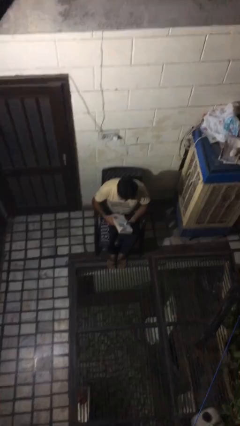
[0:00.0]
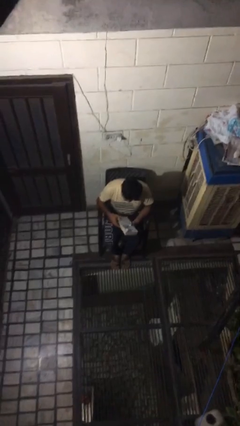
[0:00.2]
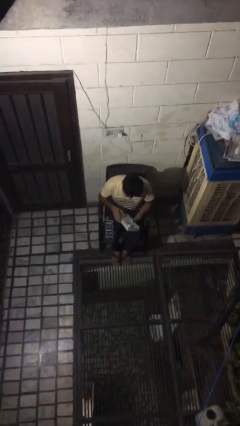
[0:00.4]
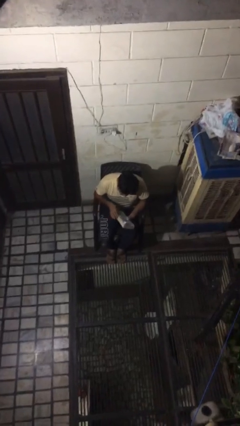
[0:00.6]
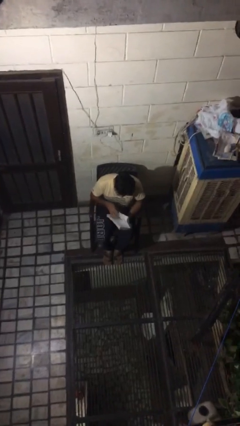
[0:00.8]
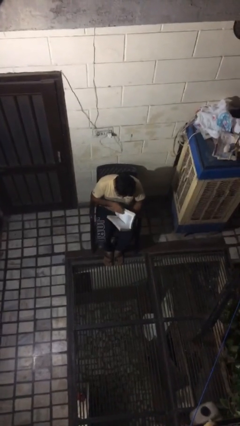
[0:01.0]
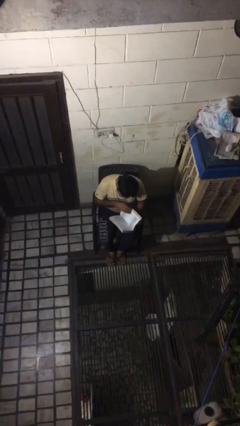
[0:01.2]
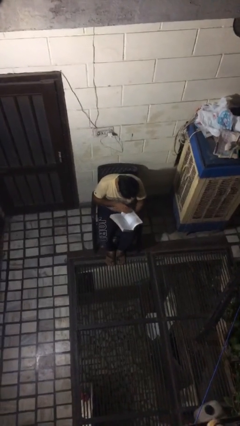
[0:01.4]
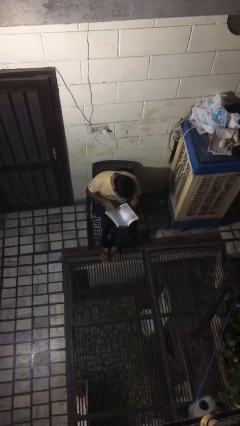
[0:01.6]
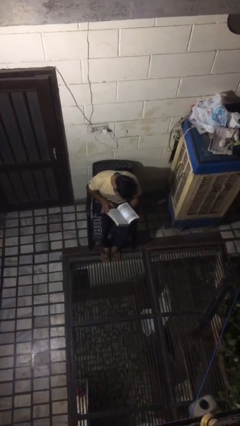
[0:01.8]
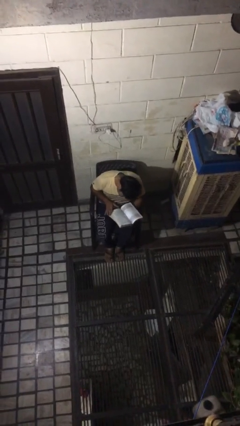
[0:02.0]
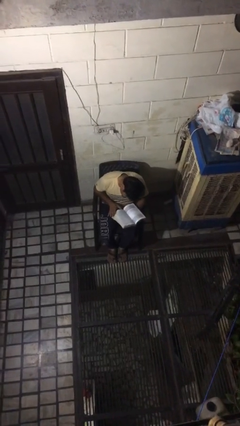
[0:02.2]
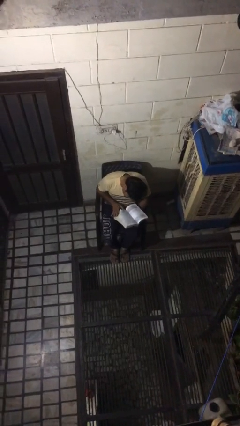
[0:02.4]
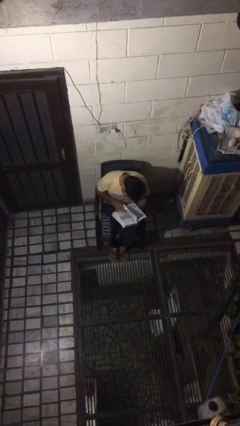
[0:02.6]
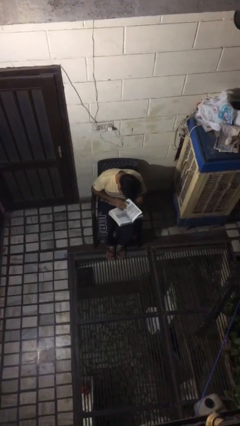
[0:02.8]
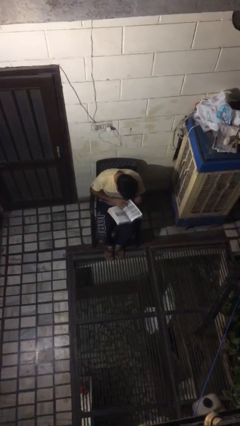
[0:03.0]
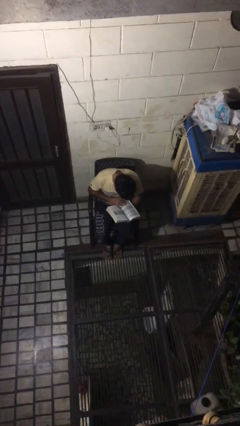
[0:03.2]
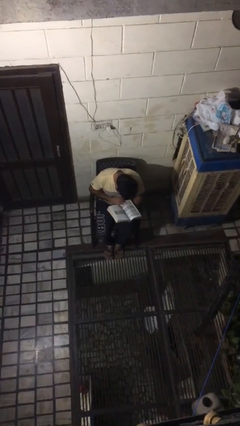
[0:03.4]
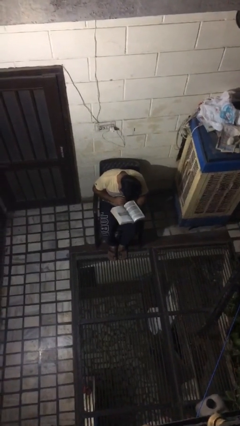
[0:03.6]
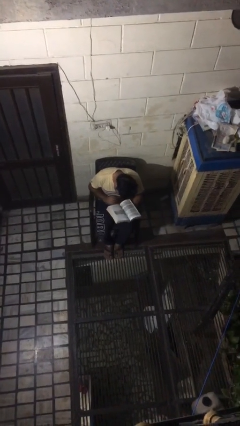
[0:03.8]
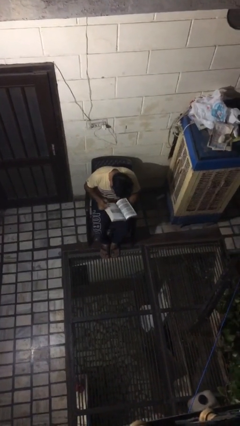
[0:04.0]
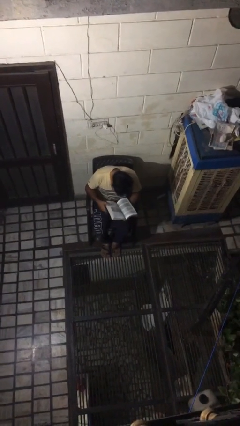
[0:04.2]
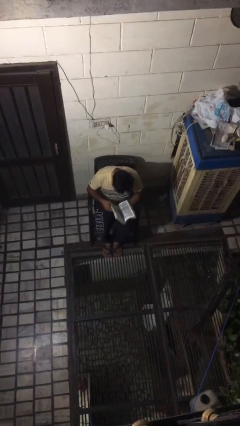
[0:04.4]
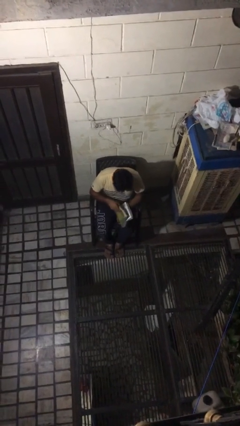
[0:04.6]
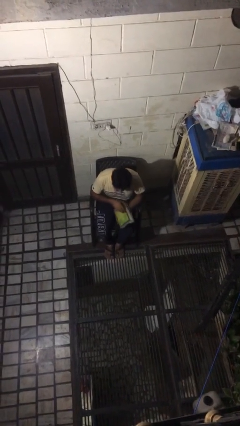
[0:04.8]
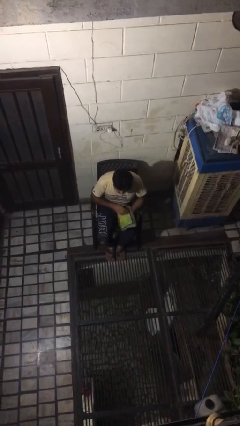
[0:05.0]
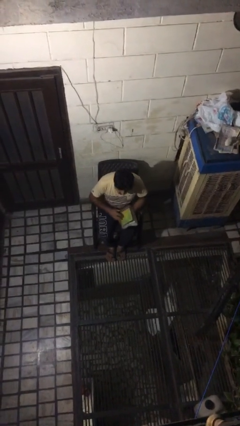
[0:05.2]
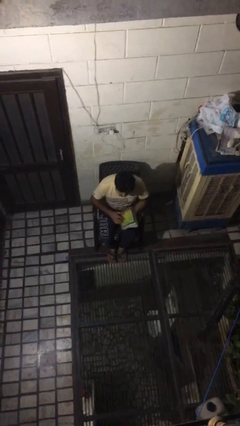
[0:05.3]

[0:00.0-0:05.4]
person reads book

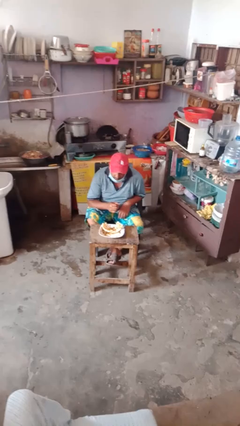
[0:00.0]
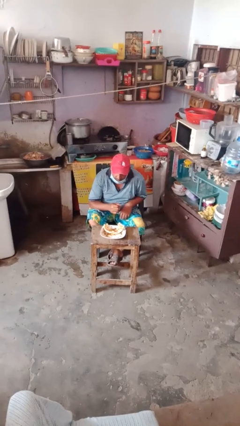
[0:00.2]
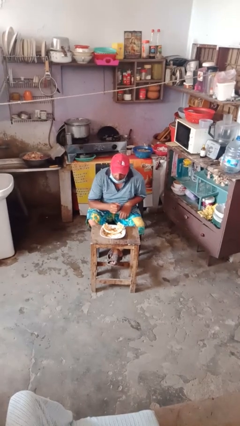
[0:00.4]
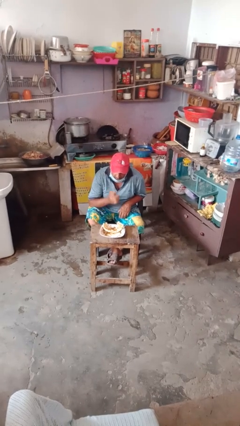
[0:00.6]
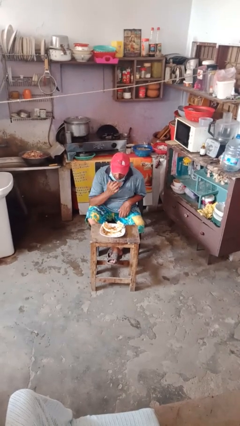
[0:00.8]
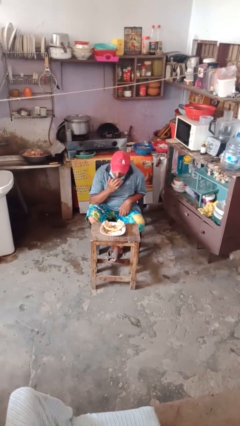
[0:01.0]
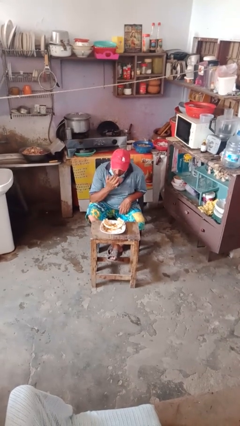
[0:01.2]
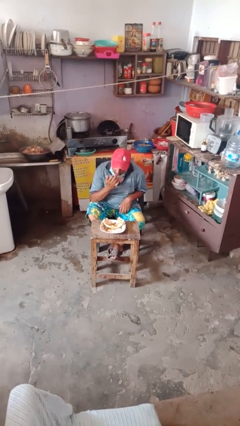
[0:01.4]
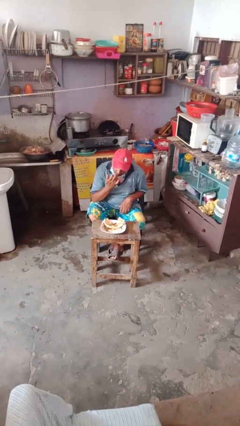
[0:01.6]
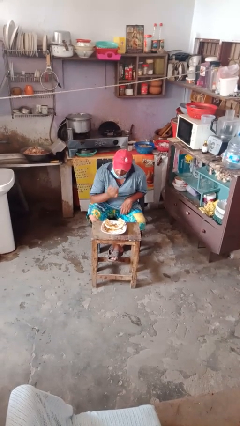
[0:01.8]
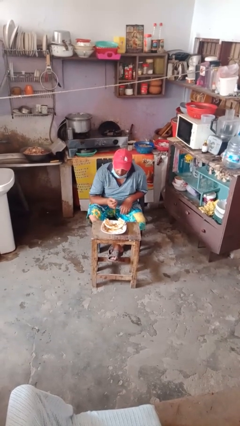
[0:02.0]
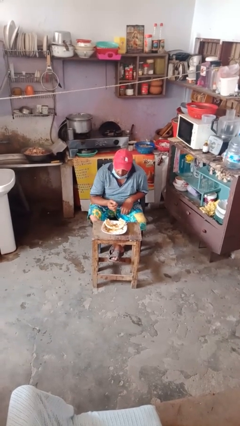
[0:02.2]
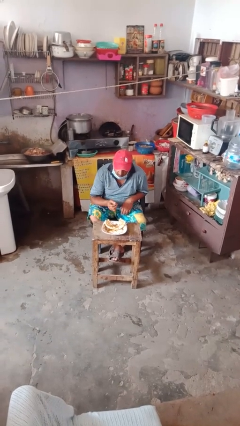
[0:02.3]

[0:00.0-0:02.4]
person licks fingers

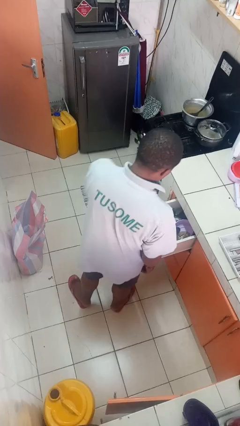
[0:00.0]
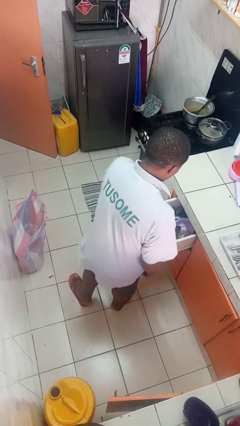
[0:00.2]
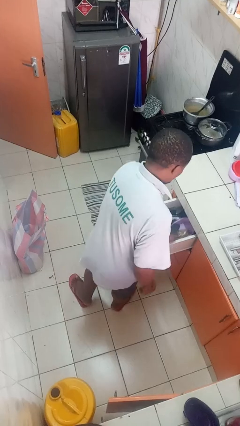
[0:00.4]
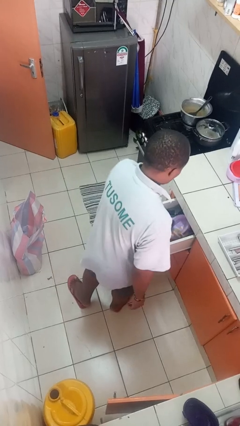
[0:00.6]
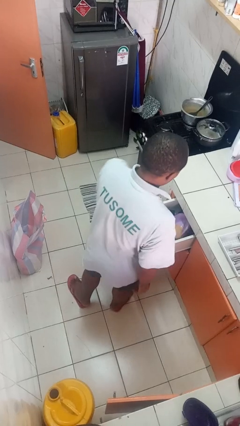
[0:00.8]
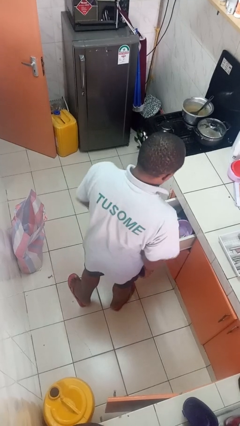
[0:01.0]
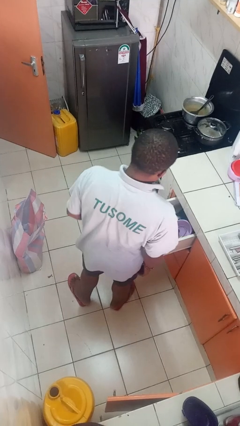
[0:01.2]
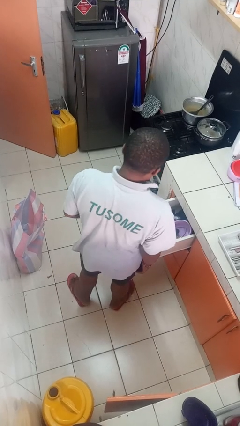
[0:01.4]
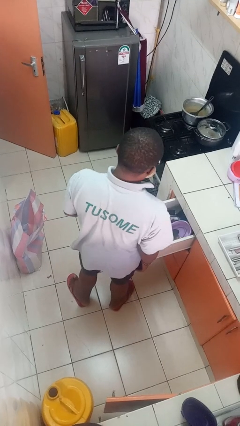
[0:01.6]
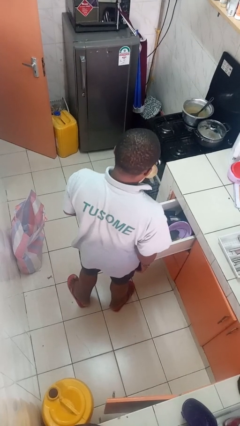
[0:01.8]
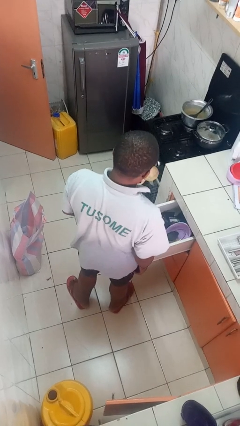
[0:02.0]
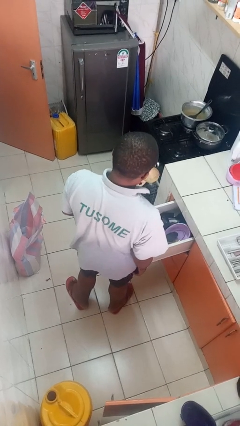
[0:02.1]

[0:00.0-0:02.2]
person takes object from kitchen drawer

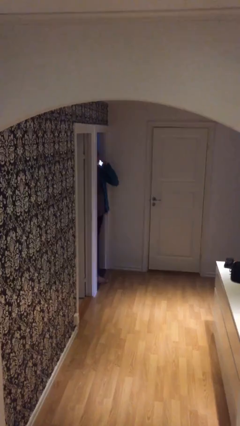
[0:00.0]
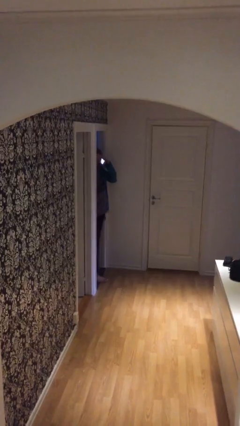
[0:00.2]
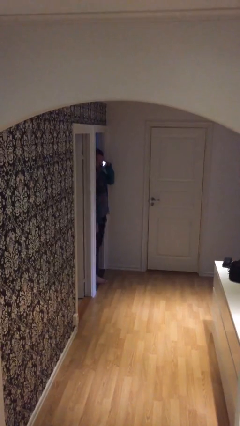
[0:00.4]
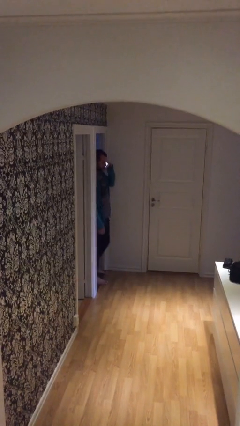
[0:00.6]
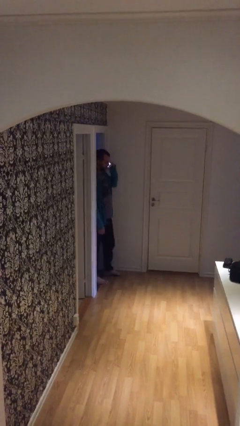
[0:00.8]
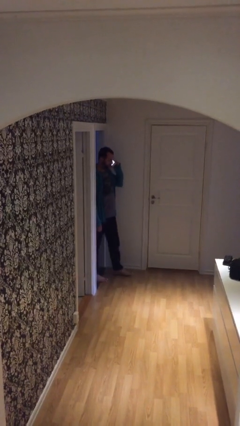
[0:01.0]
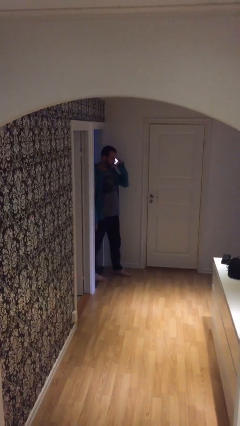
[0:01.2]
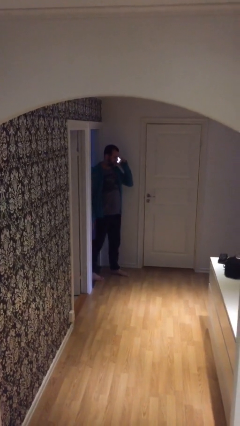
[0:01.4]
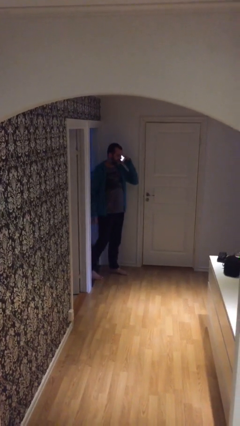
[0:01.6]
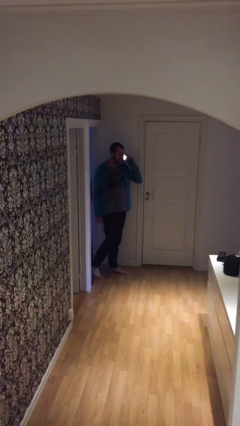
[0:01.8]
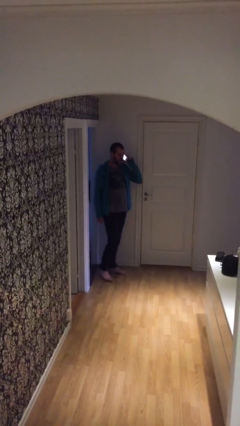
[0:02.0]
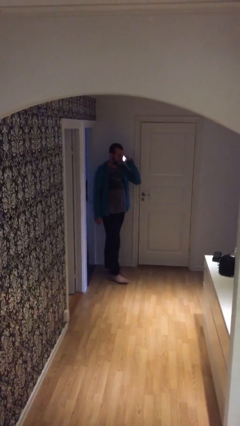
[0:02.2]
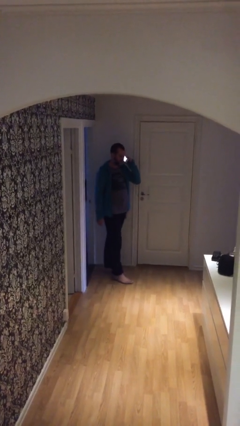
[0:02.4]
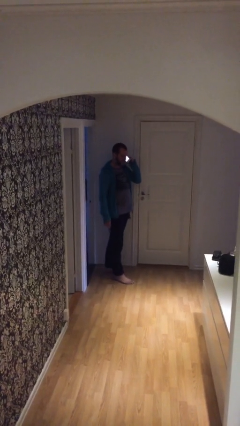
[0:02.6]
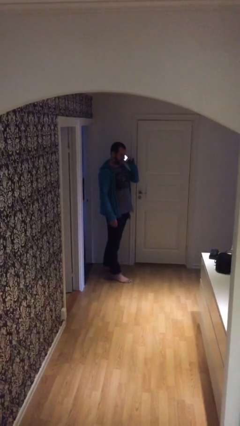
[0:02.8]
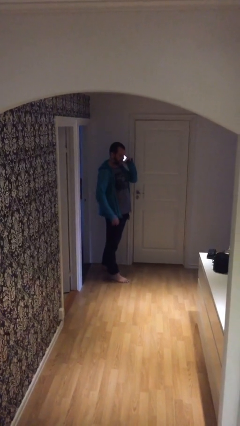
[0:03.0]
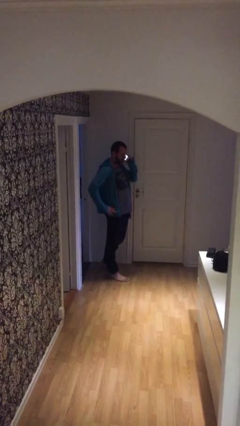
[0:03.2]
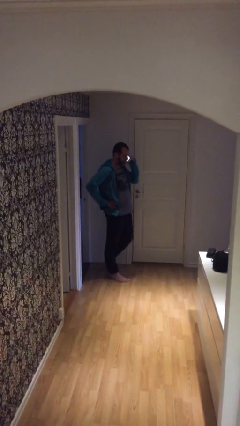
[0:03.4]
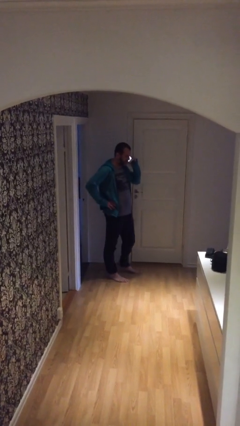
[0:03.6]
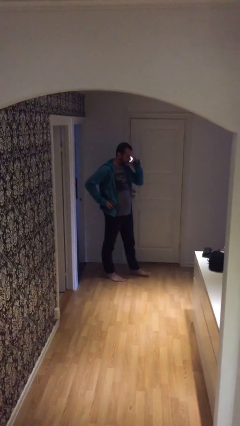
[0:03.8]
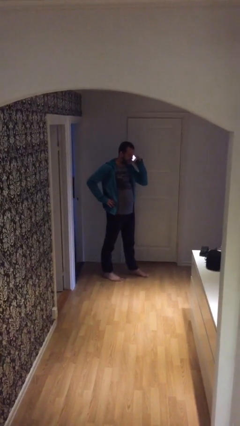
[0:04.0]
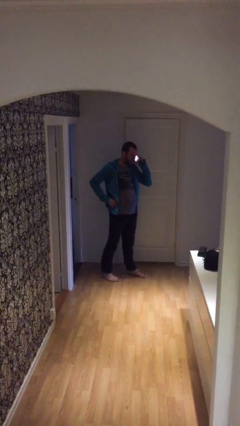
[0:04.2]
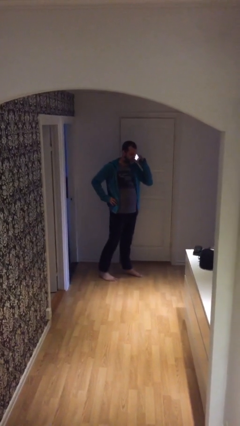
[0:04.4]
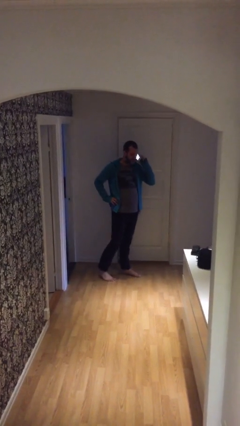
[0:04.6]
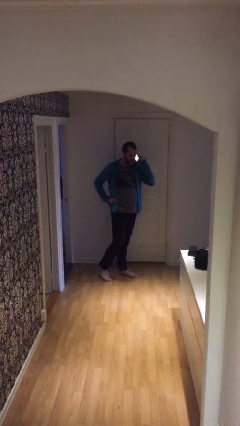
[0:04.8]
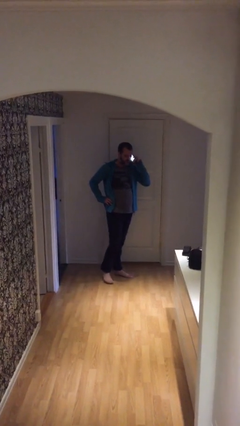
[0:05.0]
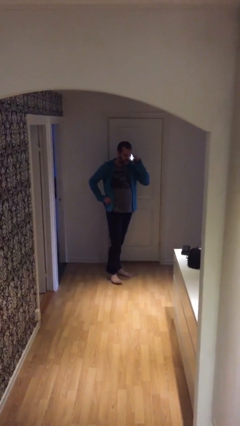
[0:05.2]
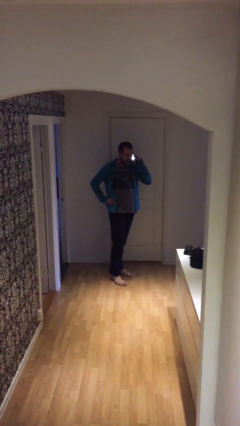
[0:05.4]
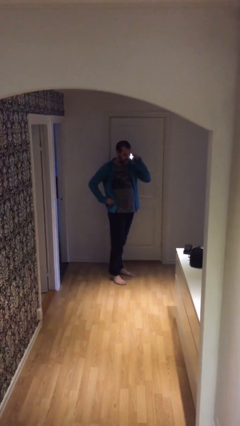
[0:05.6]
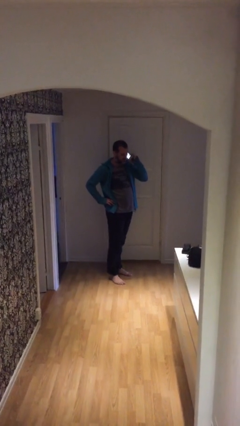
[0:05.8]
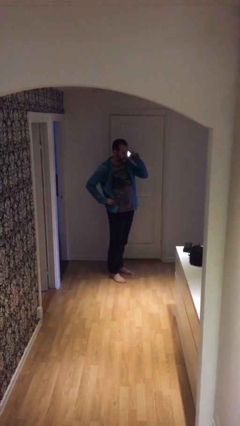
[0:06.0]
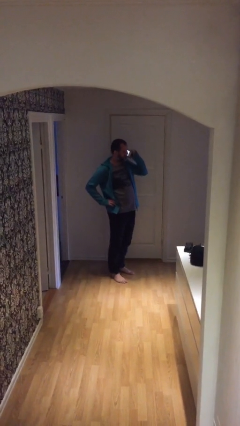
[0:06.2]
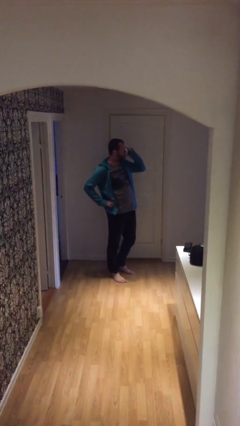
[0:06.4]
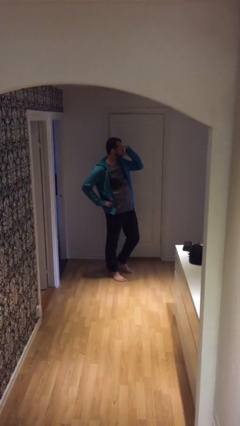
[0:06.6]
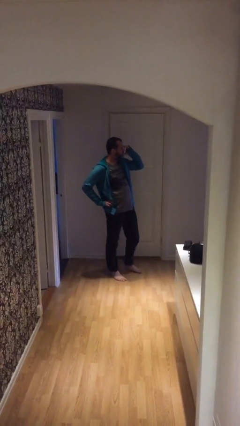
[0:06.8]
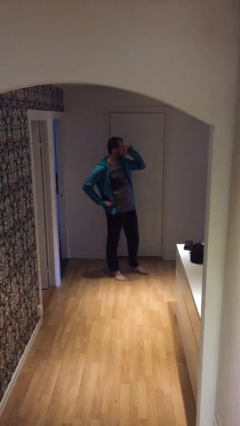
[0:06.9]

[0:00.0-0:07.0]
person enters scene through structure

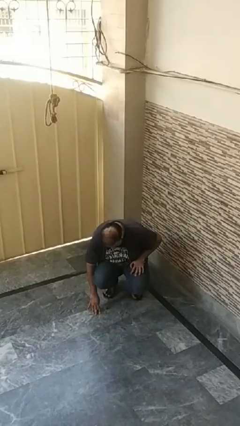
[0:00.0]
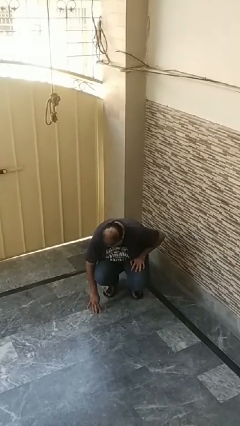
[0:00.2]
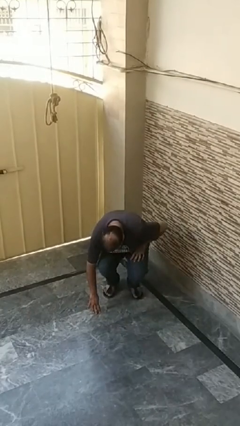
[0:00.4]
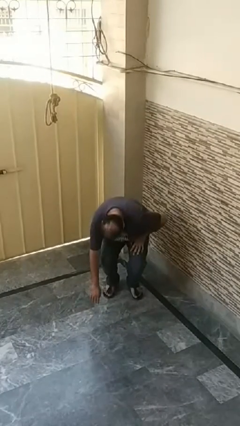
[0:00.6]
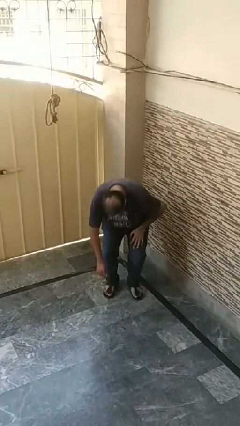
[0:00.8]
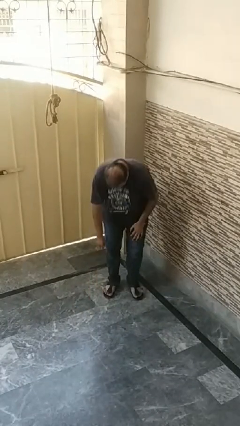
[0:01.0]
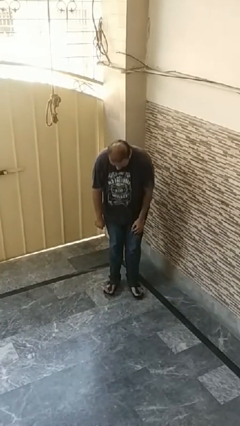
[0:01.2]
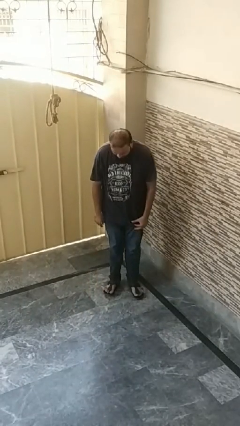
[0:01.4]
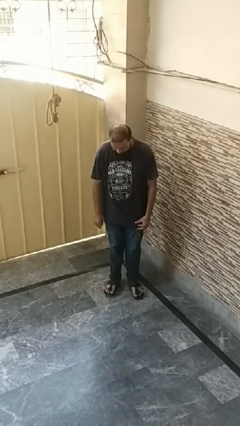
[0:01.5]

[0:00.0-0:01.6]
person stands up from floor
